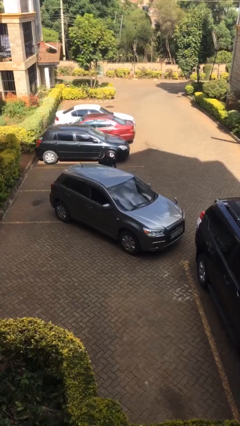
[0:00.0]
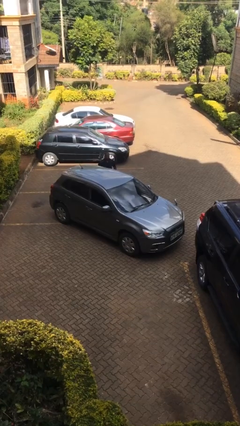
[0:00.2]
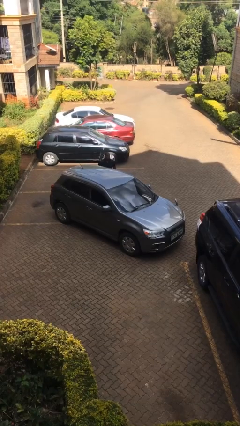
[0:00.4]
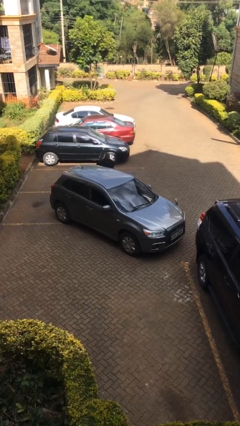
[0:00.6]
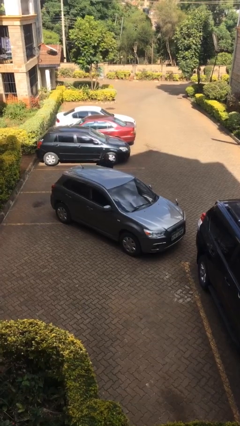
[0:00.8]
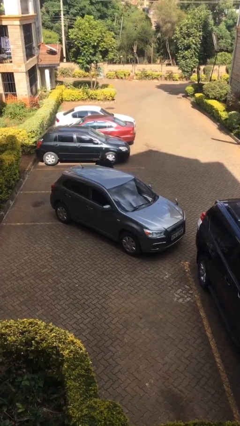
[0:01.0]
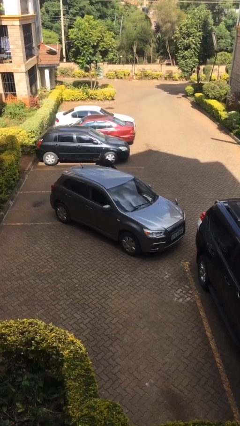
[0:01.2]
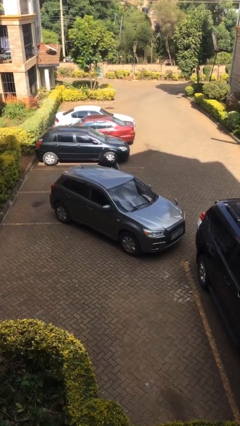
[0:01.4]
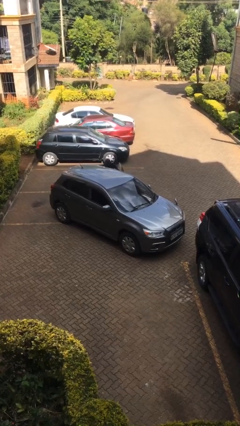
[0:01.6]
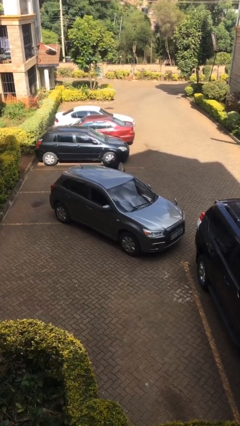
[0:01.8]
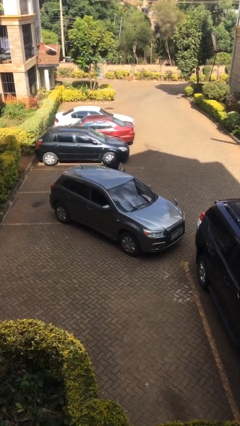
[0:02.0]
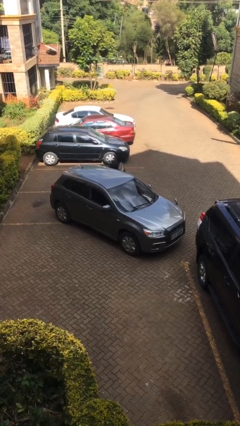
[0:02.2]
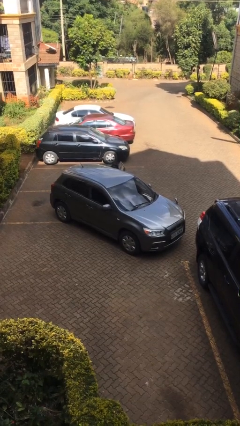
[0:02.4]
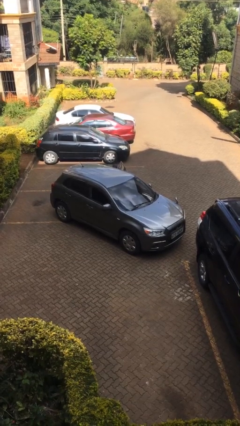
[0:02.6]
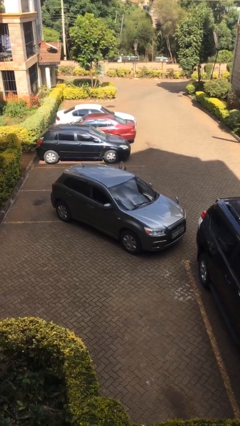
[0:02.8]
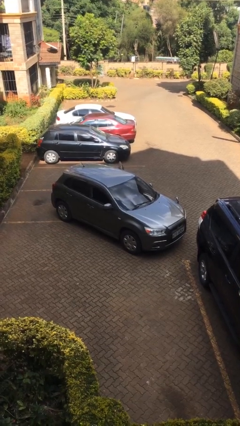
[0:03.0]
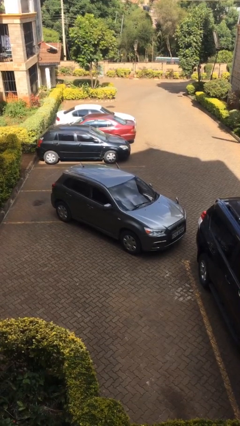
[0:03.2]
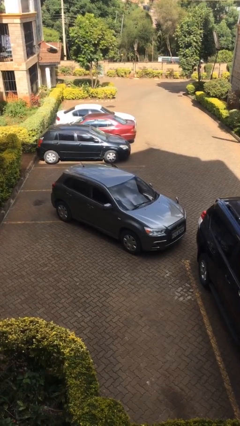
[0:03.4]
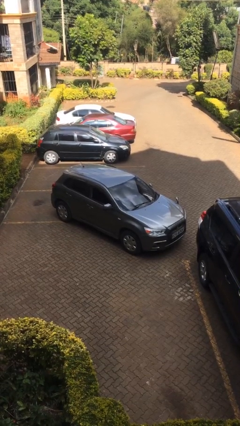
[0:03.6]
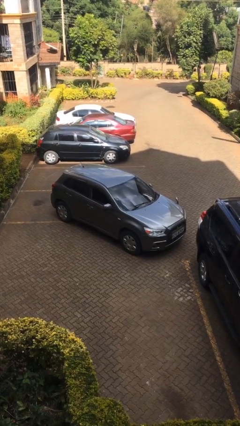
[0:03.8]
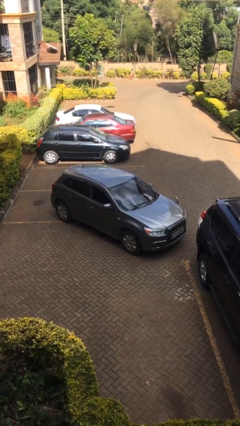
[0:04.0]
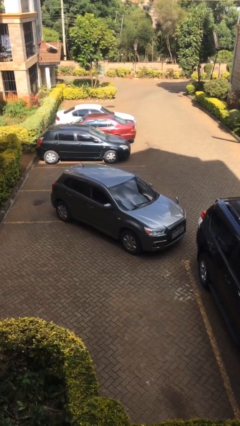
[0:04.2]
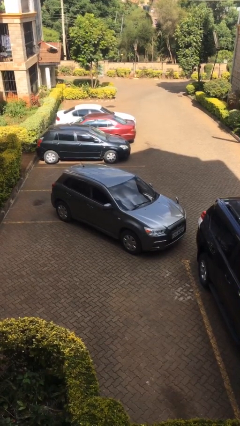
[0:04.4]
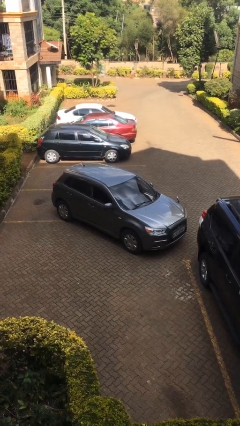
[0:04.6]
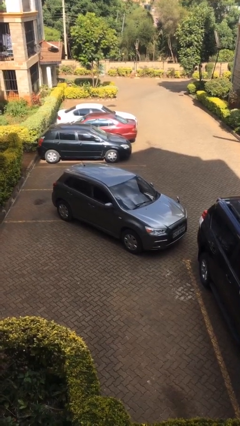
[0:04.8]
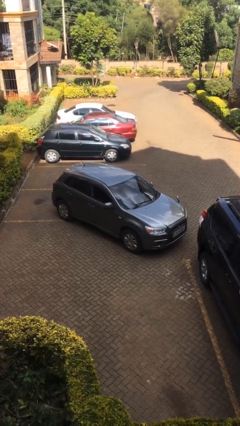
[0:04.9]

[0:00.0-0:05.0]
car picks up person

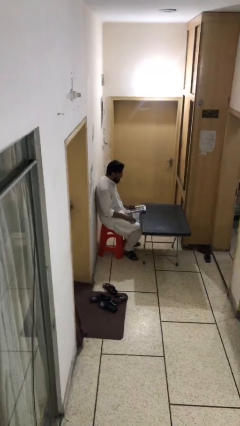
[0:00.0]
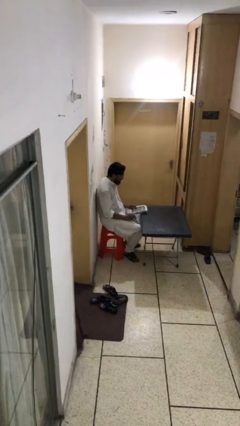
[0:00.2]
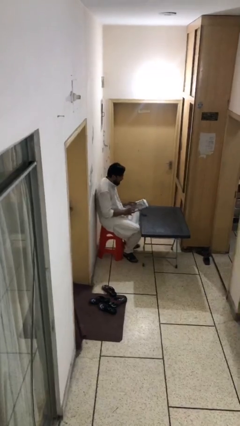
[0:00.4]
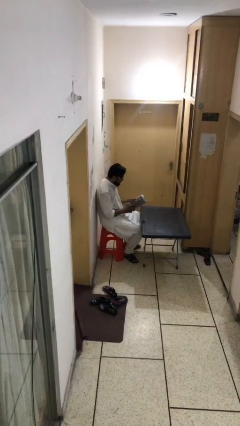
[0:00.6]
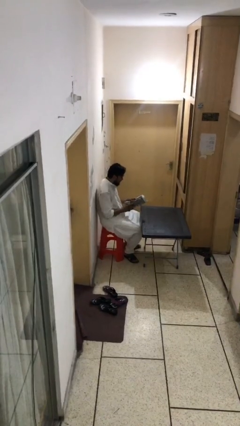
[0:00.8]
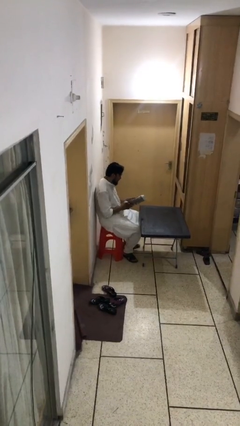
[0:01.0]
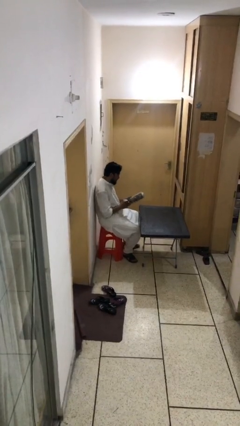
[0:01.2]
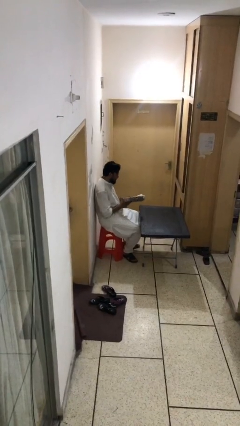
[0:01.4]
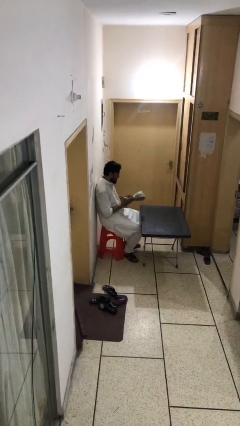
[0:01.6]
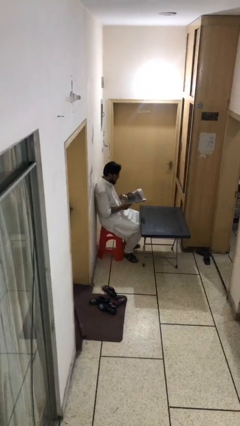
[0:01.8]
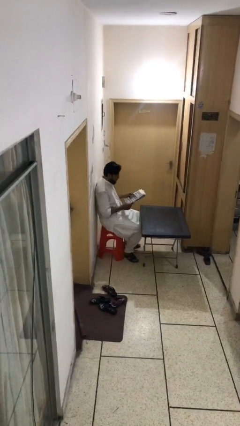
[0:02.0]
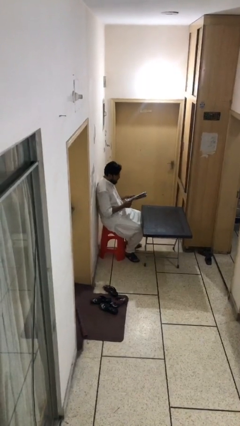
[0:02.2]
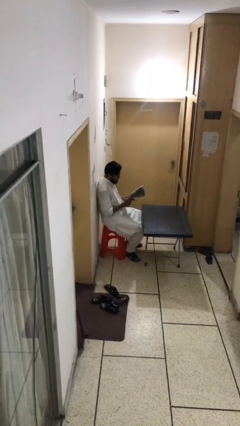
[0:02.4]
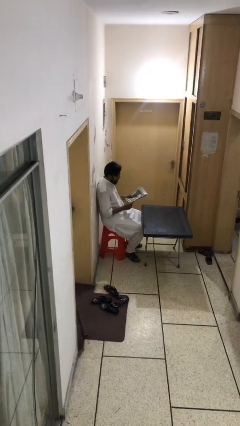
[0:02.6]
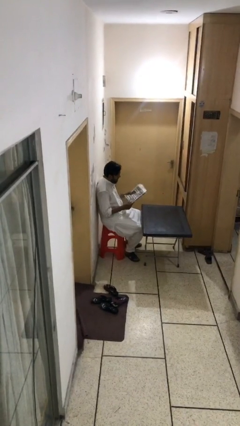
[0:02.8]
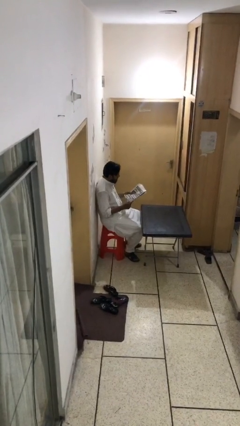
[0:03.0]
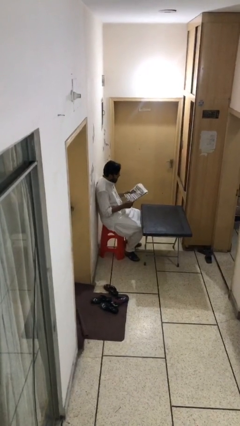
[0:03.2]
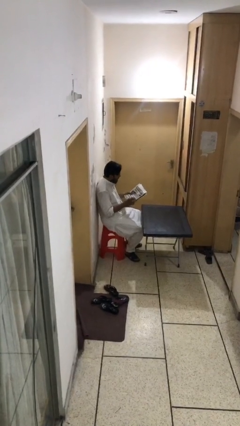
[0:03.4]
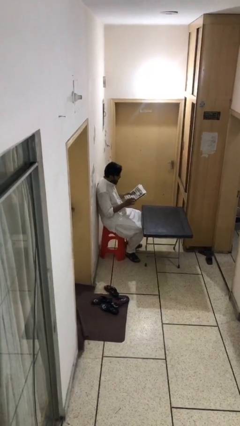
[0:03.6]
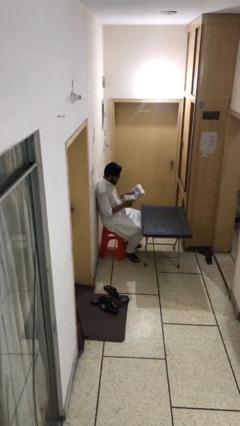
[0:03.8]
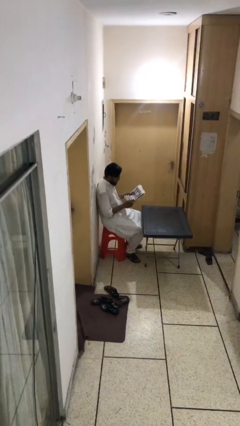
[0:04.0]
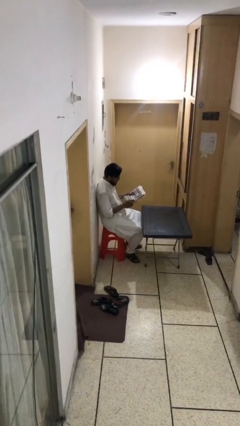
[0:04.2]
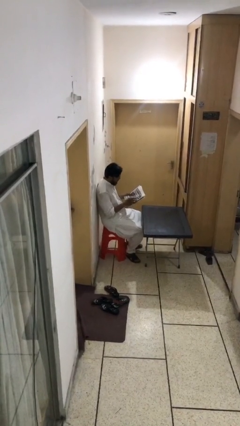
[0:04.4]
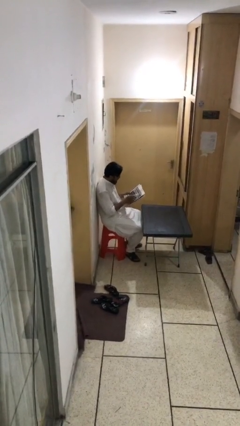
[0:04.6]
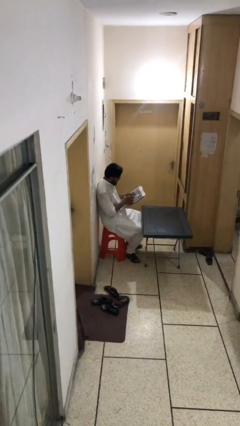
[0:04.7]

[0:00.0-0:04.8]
person reads document

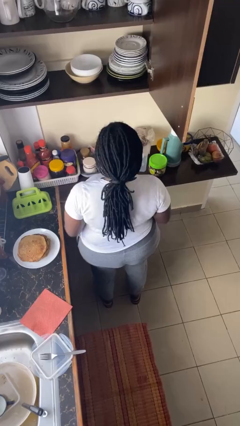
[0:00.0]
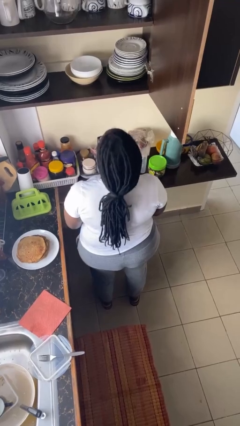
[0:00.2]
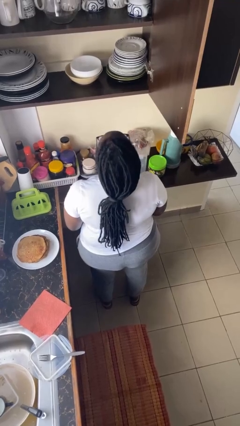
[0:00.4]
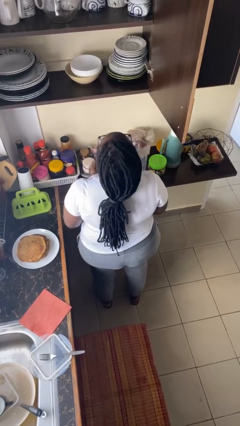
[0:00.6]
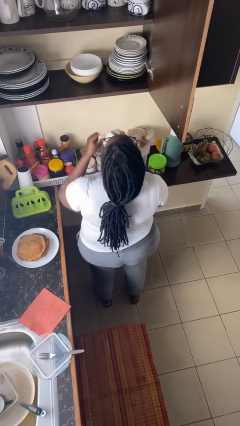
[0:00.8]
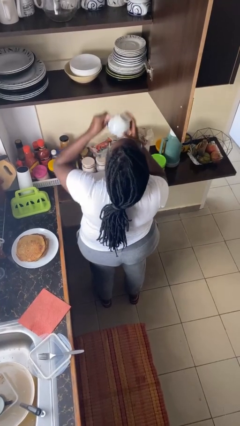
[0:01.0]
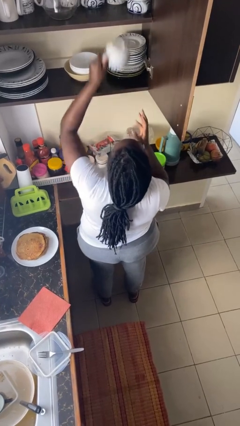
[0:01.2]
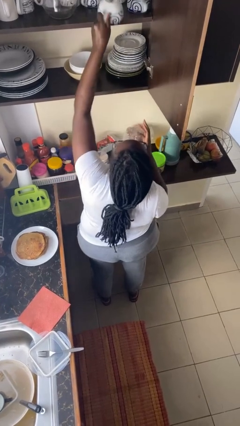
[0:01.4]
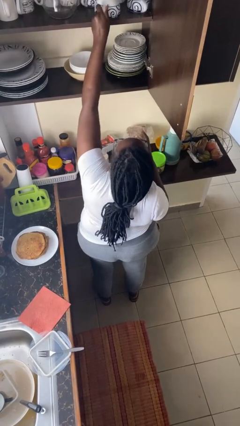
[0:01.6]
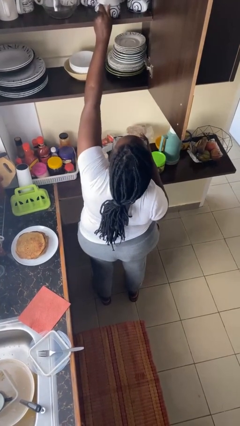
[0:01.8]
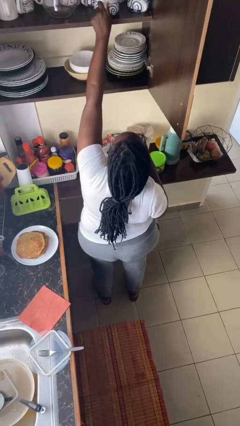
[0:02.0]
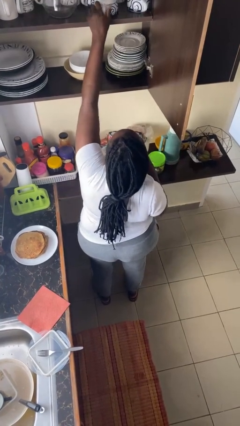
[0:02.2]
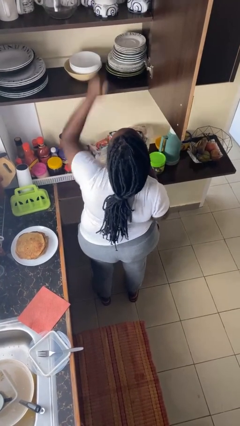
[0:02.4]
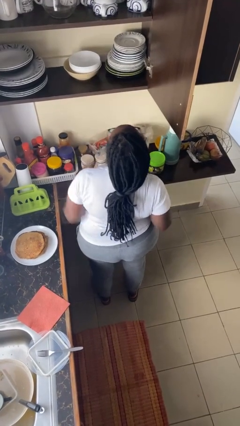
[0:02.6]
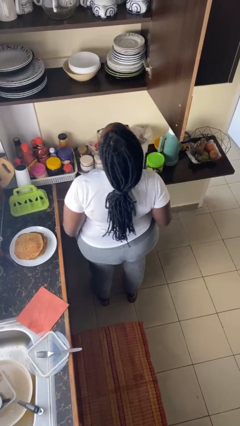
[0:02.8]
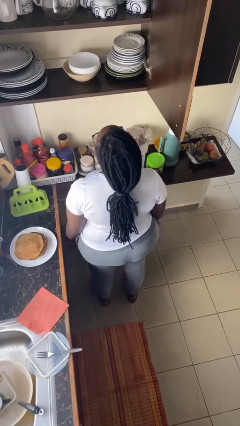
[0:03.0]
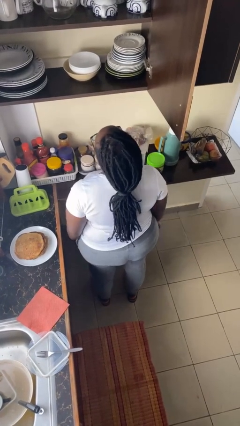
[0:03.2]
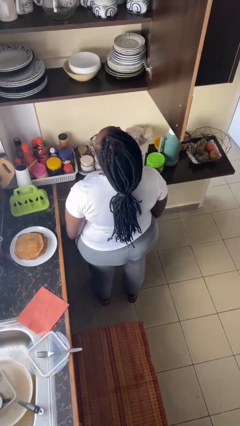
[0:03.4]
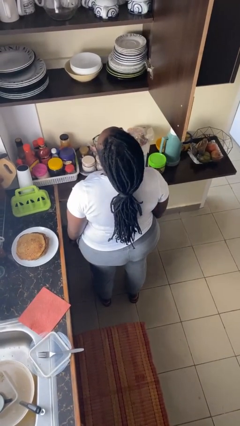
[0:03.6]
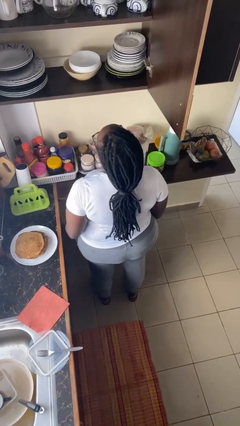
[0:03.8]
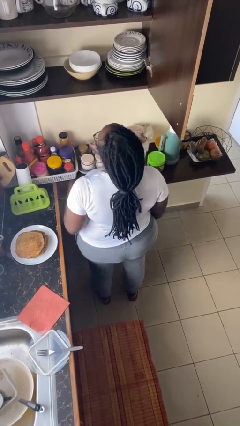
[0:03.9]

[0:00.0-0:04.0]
person puts object in cabinet

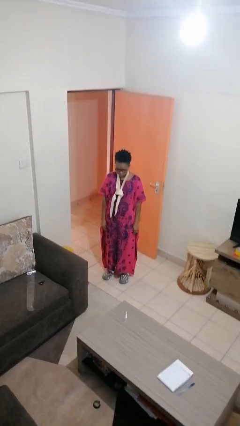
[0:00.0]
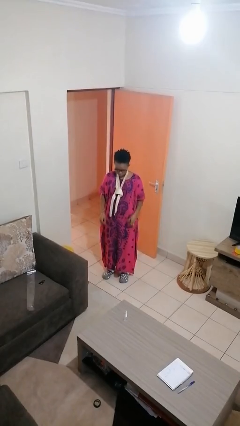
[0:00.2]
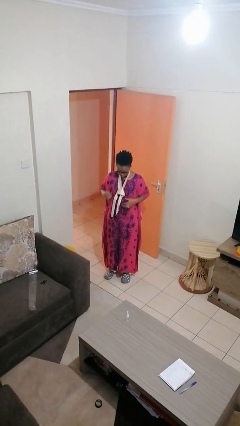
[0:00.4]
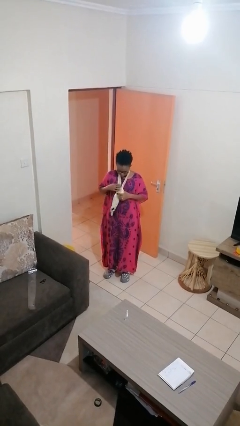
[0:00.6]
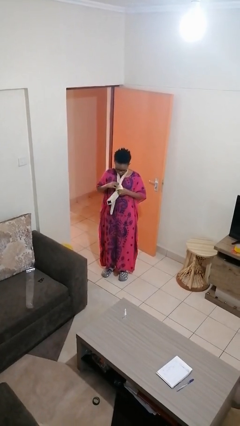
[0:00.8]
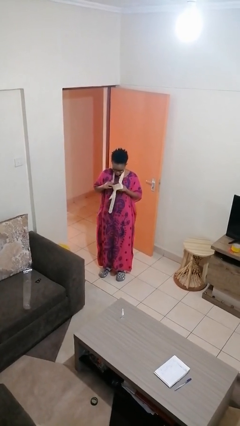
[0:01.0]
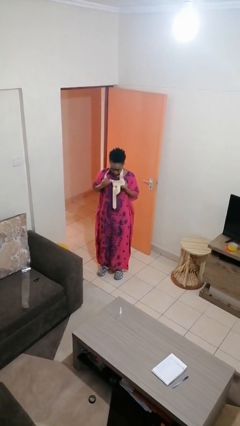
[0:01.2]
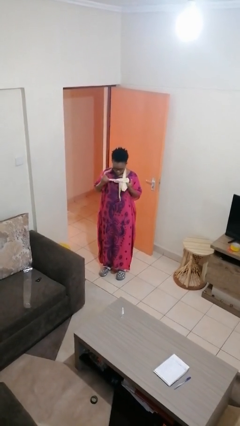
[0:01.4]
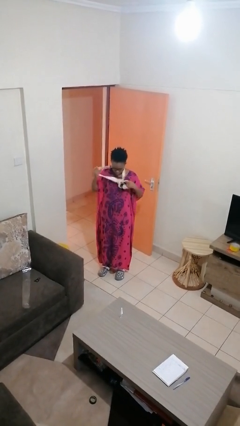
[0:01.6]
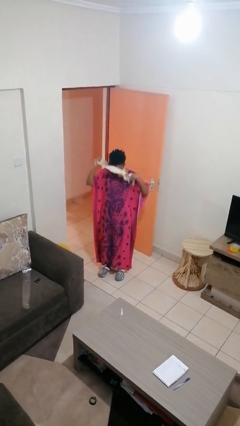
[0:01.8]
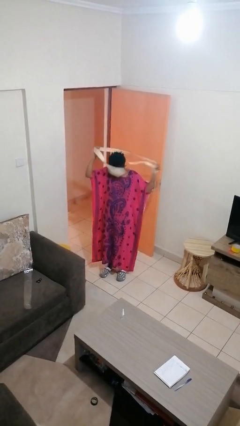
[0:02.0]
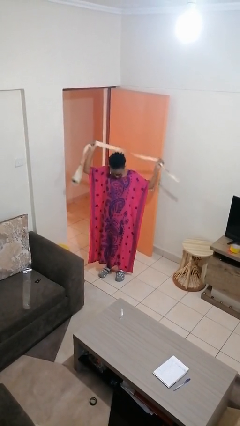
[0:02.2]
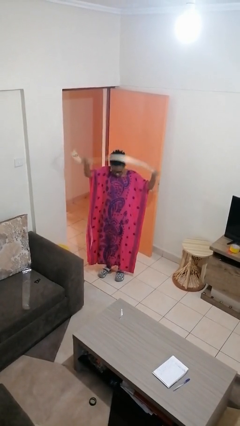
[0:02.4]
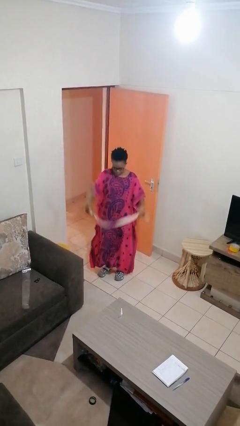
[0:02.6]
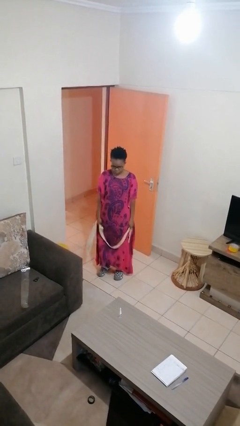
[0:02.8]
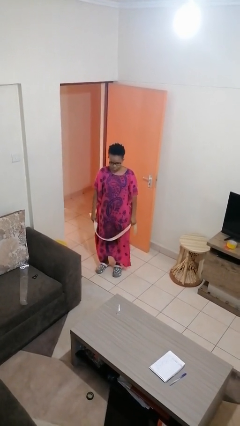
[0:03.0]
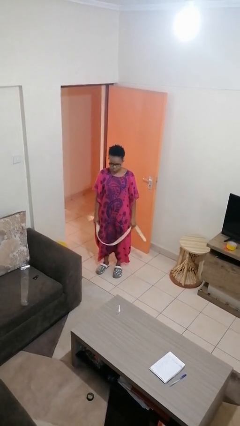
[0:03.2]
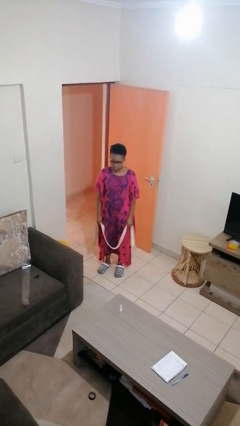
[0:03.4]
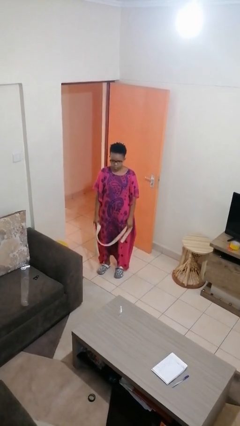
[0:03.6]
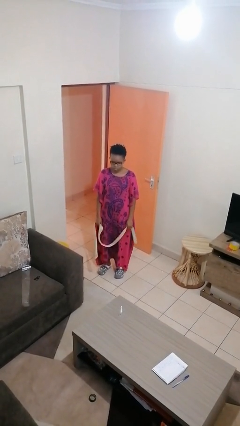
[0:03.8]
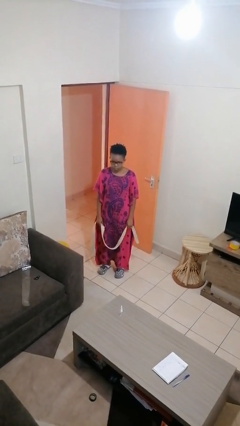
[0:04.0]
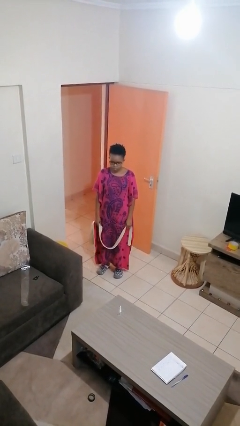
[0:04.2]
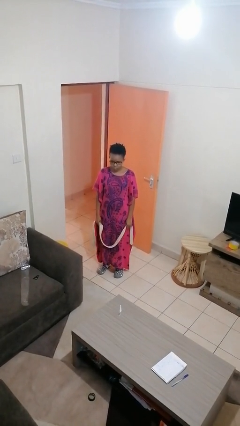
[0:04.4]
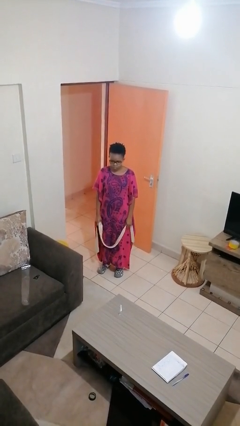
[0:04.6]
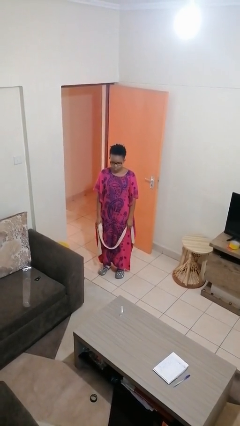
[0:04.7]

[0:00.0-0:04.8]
person takes off necktie
